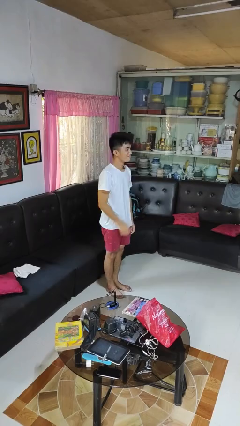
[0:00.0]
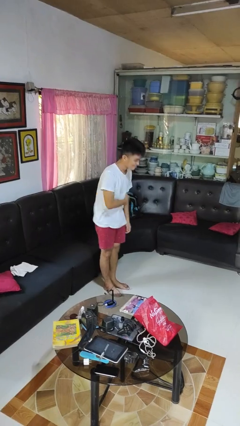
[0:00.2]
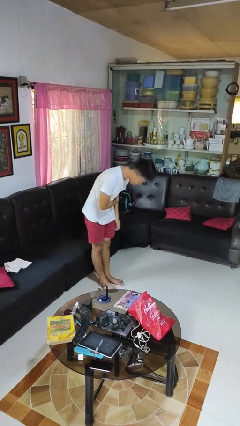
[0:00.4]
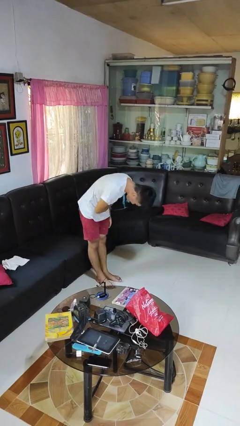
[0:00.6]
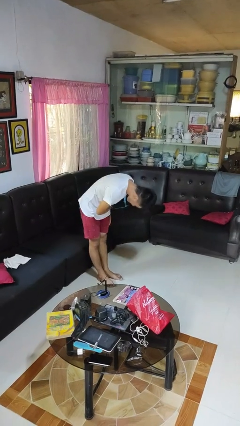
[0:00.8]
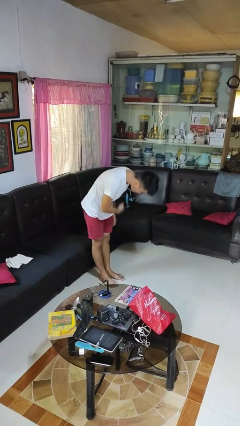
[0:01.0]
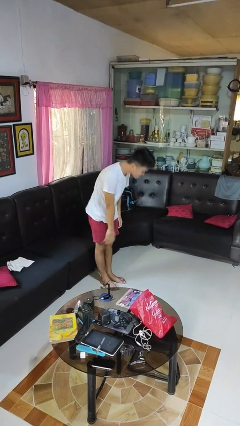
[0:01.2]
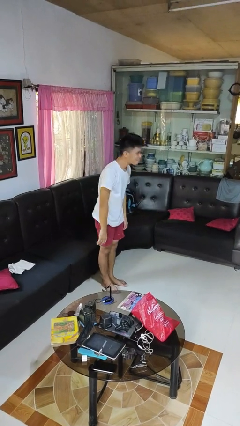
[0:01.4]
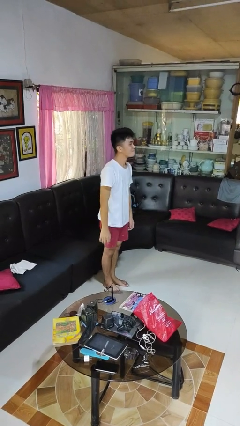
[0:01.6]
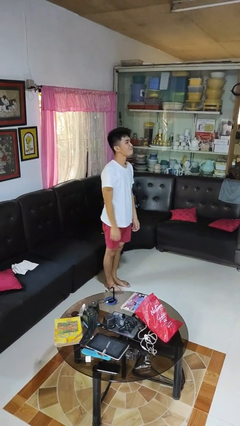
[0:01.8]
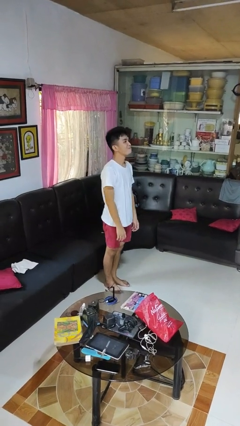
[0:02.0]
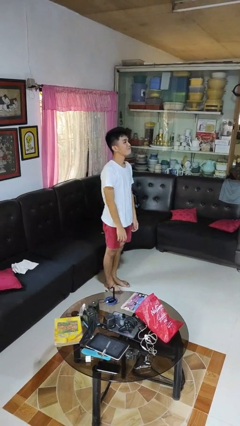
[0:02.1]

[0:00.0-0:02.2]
person bows

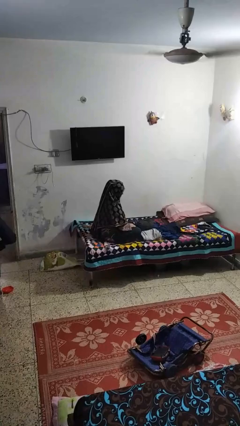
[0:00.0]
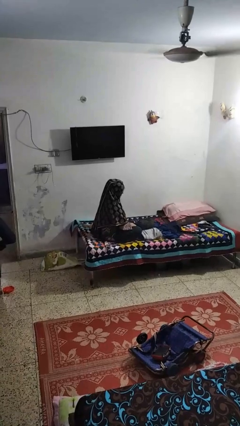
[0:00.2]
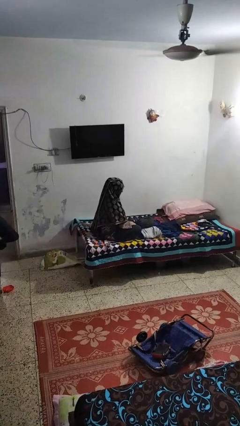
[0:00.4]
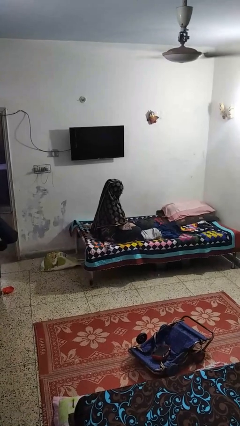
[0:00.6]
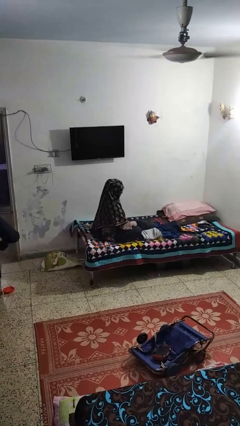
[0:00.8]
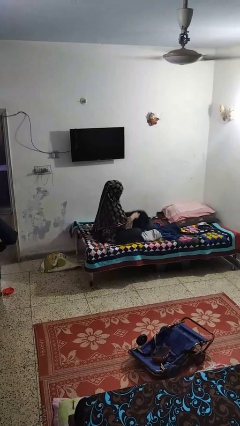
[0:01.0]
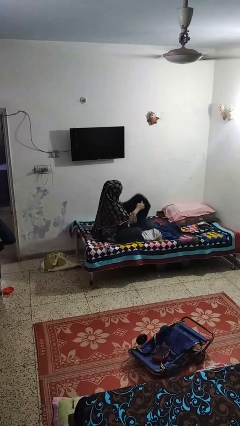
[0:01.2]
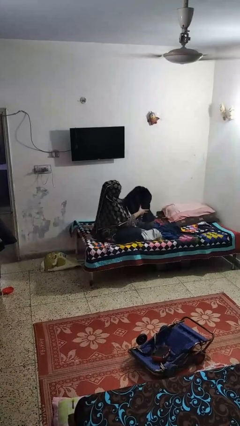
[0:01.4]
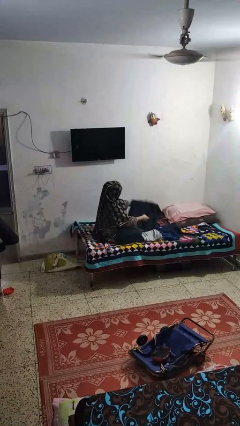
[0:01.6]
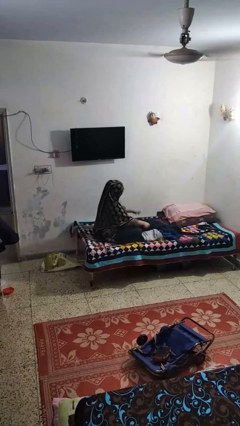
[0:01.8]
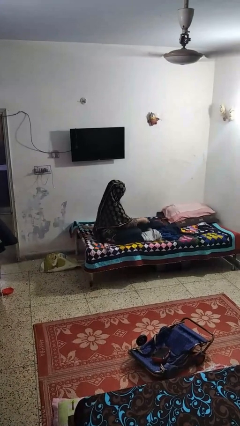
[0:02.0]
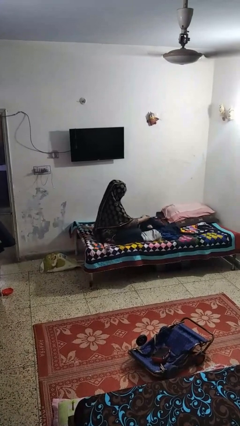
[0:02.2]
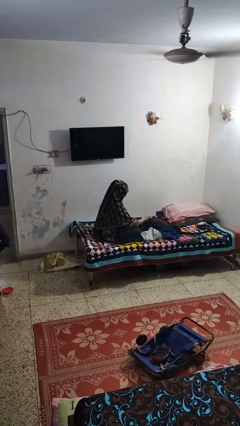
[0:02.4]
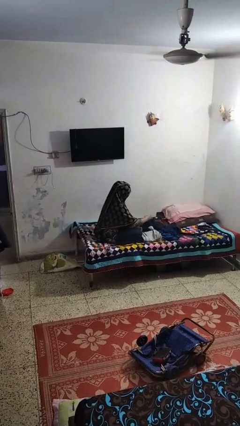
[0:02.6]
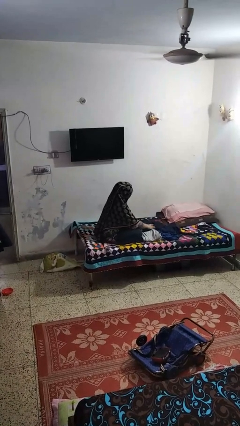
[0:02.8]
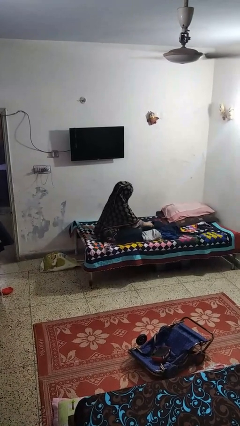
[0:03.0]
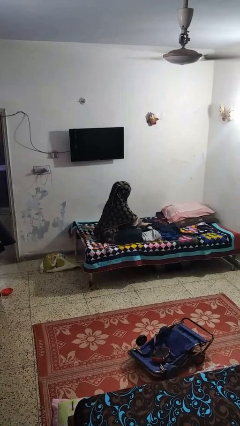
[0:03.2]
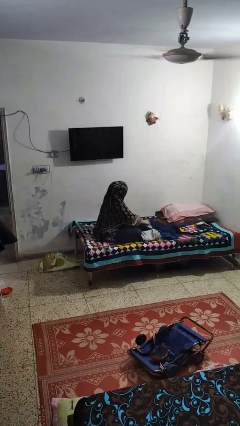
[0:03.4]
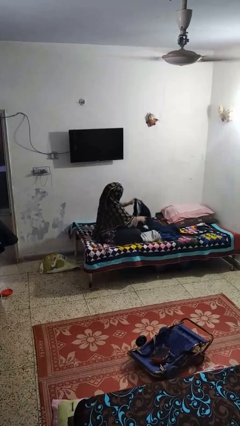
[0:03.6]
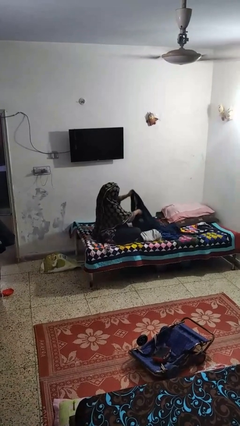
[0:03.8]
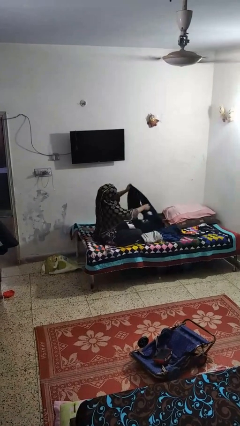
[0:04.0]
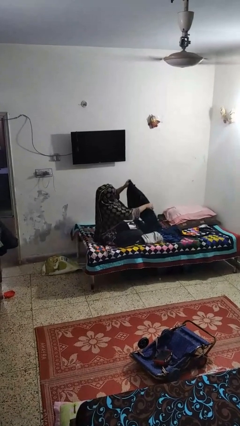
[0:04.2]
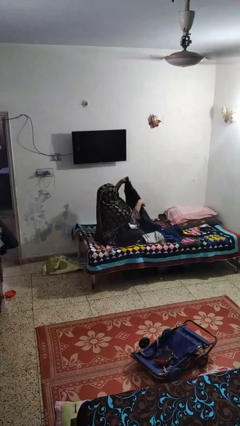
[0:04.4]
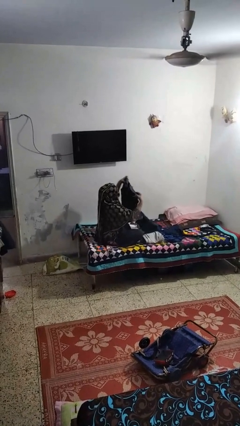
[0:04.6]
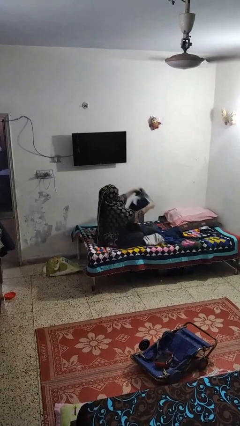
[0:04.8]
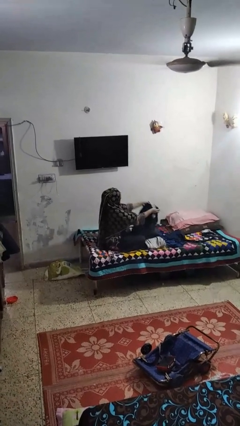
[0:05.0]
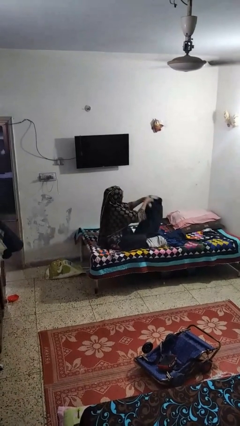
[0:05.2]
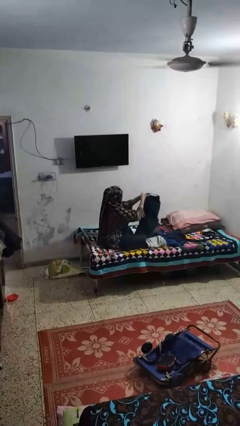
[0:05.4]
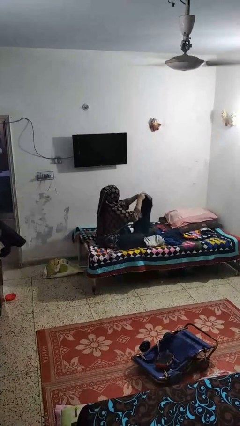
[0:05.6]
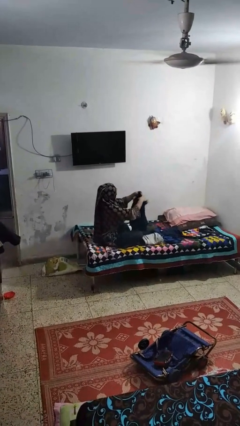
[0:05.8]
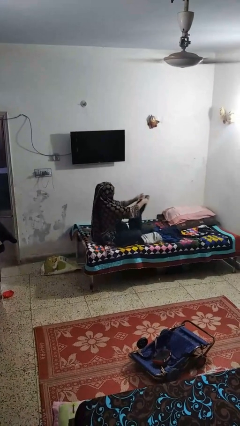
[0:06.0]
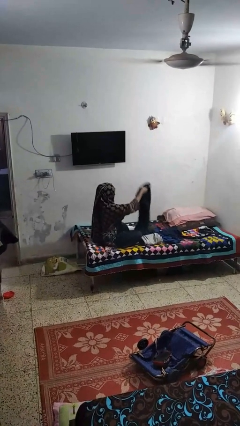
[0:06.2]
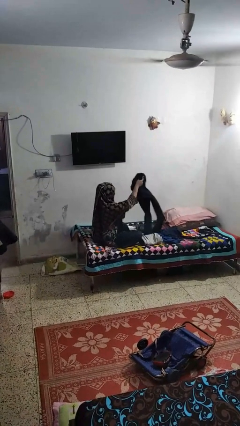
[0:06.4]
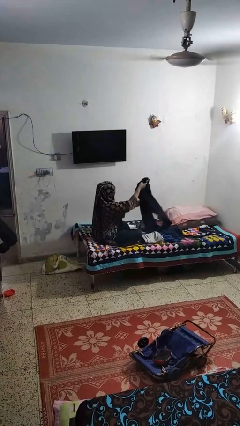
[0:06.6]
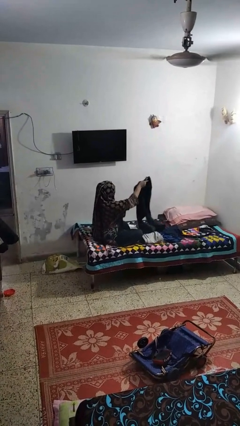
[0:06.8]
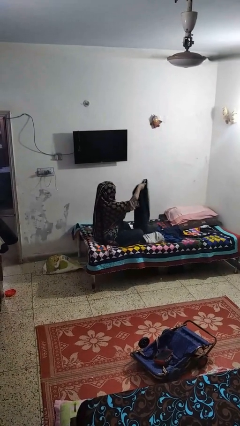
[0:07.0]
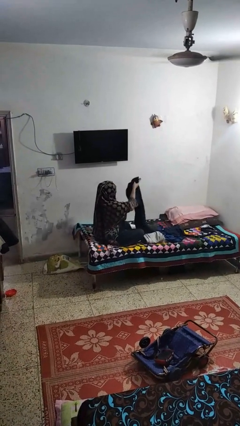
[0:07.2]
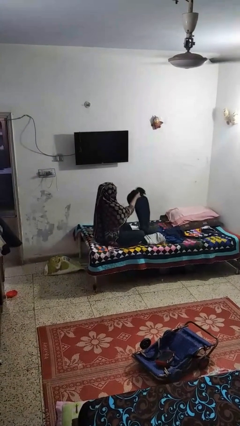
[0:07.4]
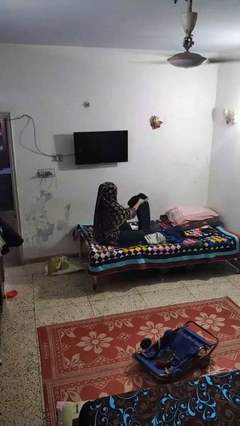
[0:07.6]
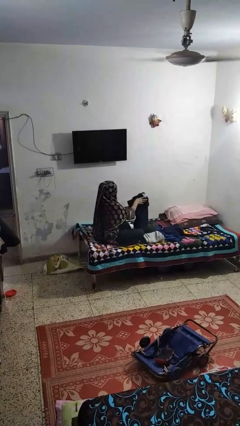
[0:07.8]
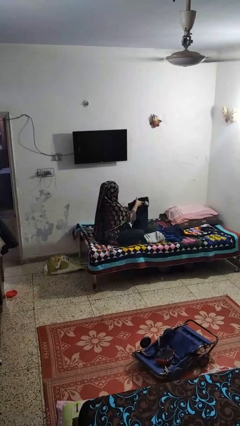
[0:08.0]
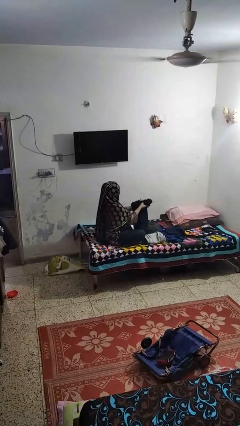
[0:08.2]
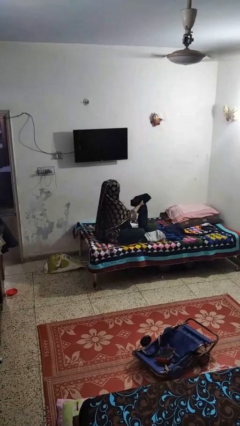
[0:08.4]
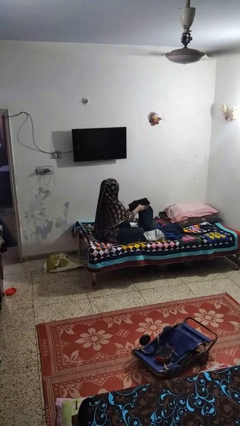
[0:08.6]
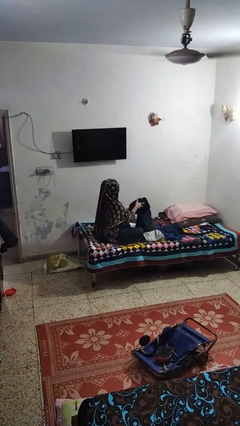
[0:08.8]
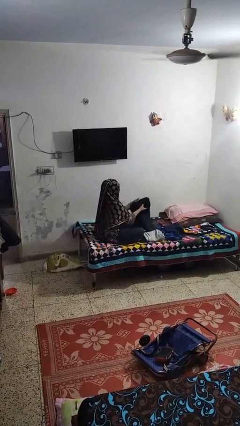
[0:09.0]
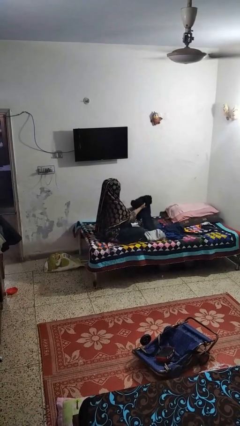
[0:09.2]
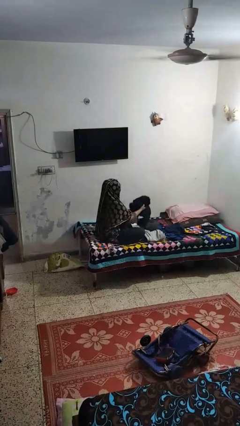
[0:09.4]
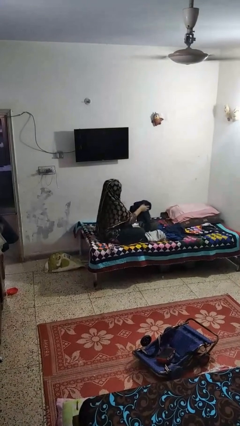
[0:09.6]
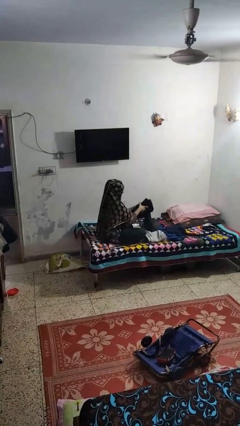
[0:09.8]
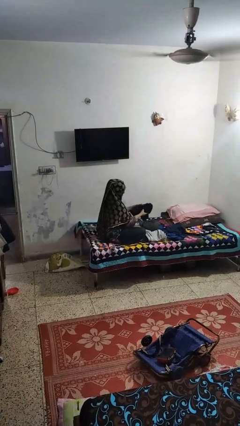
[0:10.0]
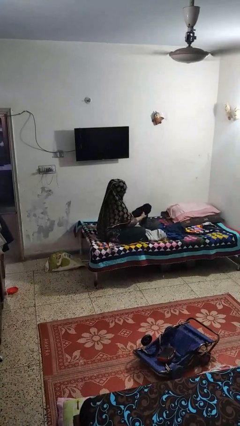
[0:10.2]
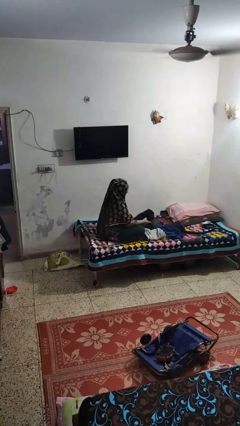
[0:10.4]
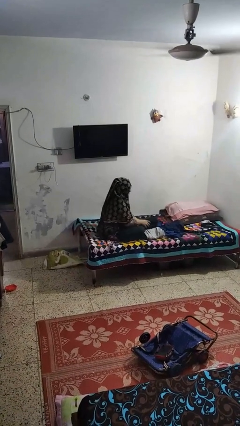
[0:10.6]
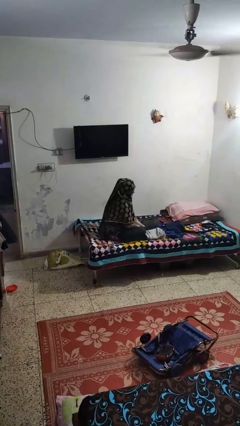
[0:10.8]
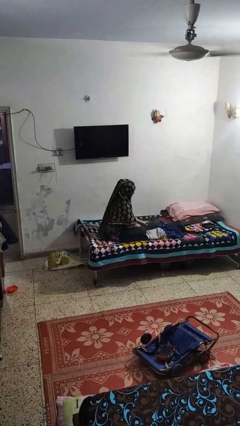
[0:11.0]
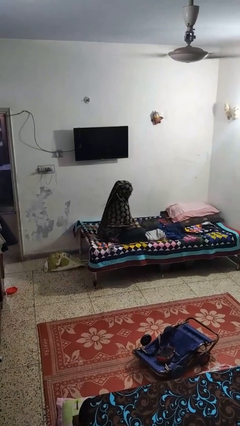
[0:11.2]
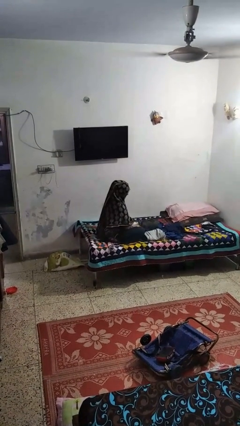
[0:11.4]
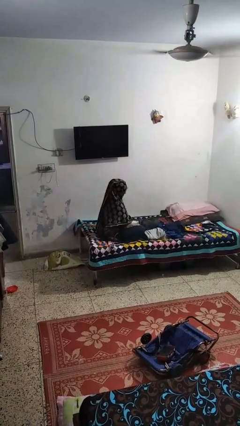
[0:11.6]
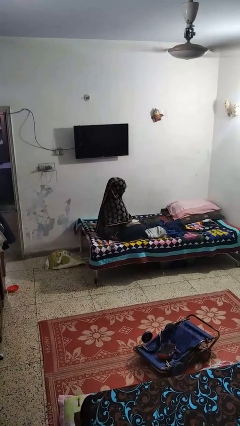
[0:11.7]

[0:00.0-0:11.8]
person folds pants

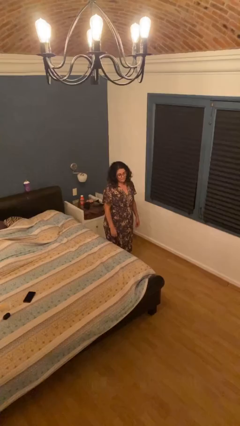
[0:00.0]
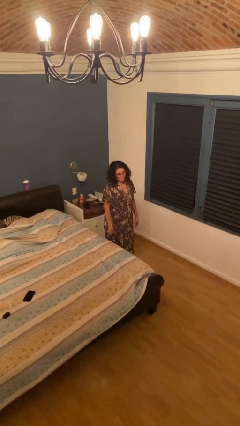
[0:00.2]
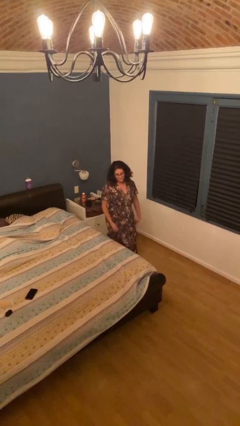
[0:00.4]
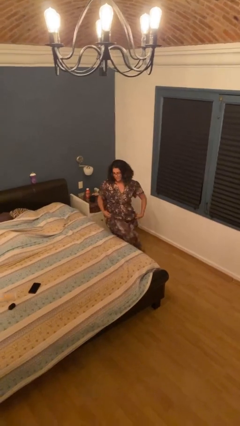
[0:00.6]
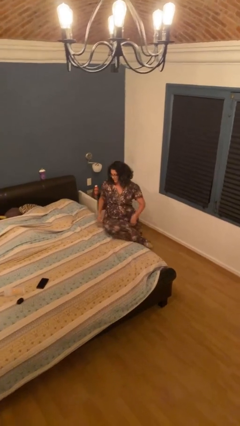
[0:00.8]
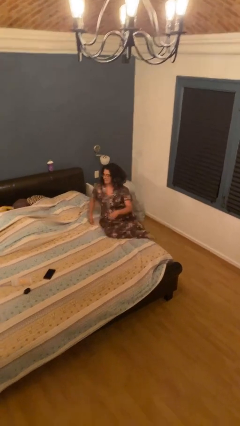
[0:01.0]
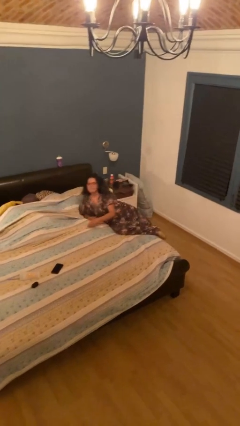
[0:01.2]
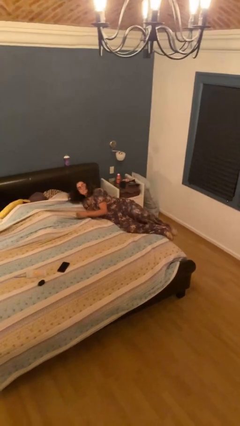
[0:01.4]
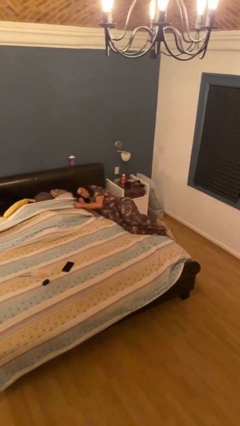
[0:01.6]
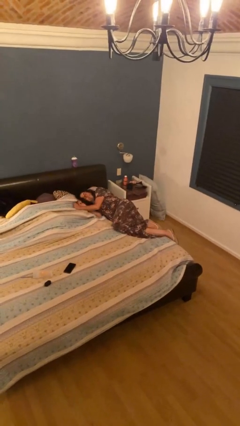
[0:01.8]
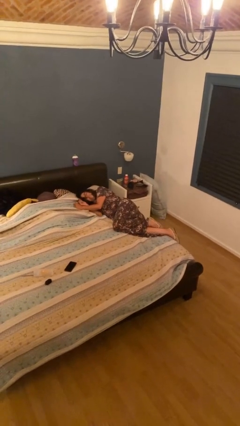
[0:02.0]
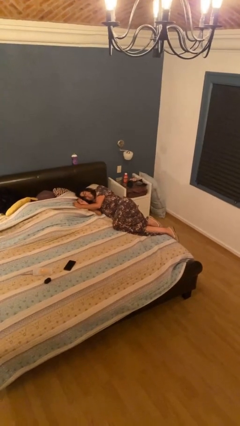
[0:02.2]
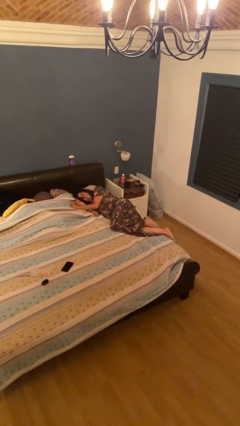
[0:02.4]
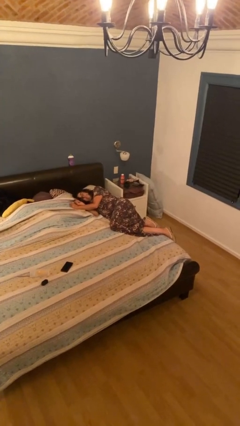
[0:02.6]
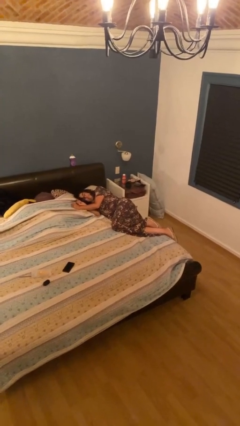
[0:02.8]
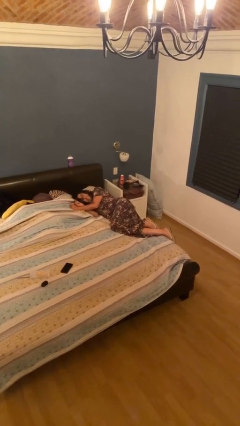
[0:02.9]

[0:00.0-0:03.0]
person lies down on bed

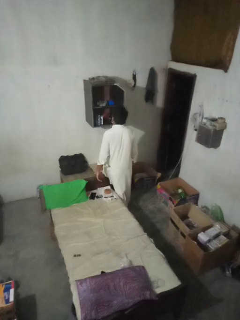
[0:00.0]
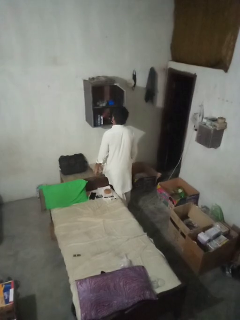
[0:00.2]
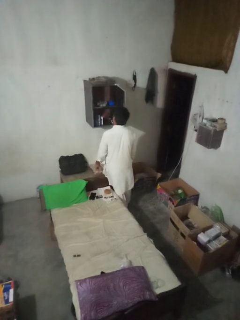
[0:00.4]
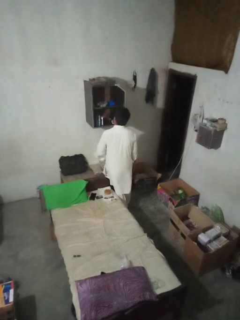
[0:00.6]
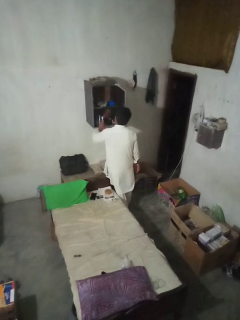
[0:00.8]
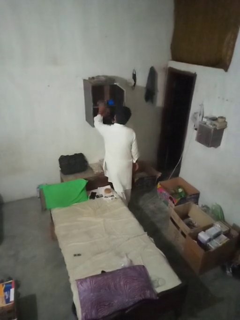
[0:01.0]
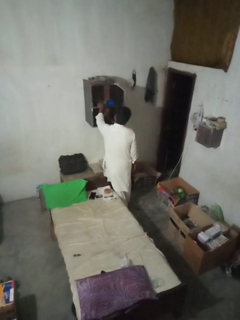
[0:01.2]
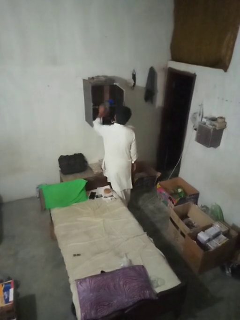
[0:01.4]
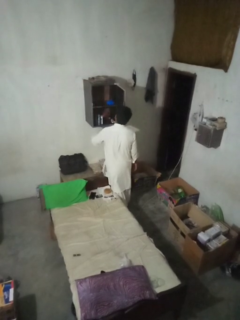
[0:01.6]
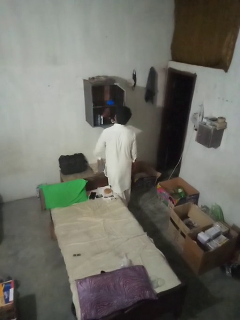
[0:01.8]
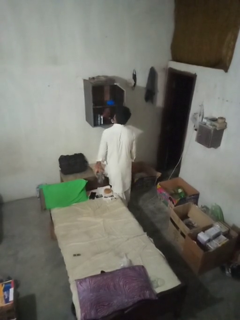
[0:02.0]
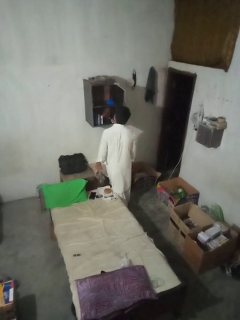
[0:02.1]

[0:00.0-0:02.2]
person takes clothes from dresser
